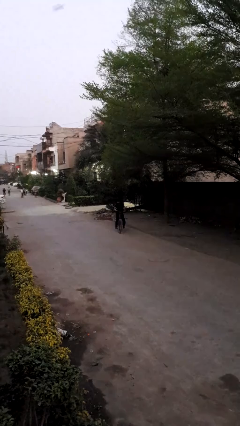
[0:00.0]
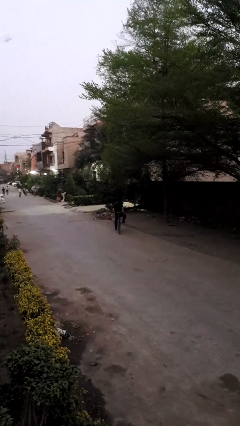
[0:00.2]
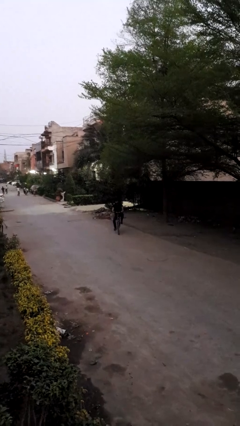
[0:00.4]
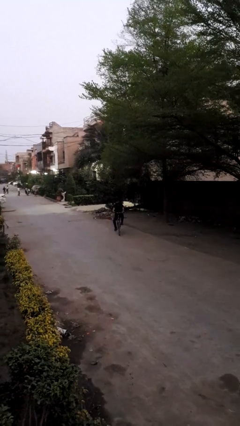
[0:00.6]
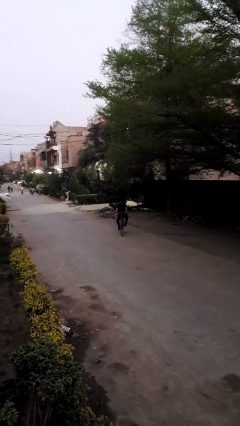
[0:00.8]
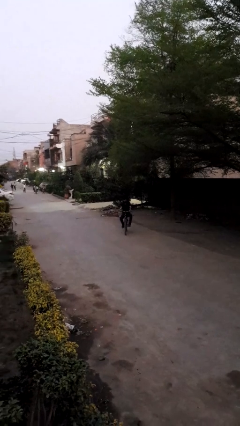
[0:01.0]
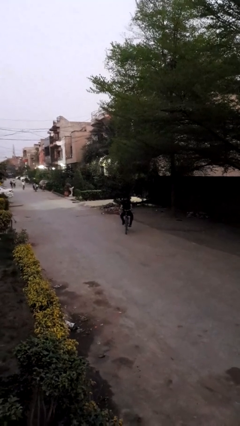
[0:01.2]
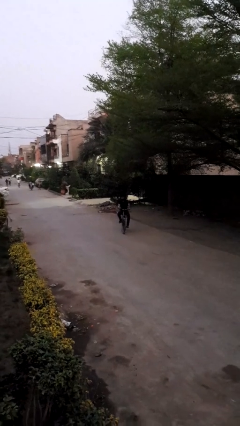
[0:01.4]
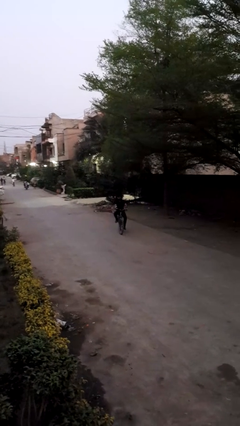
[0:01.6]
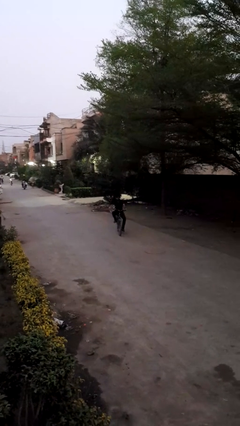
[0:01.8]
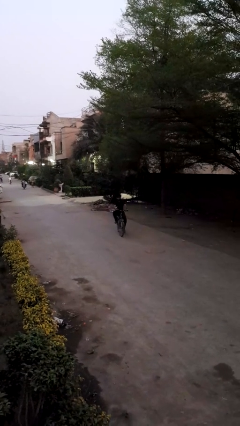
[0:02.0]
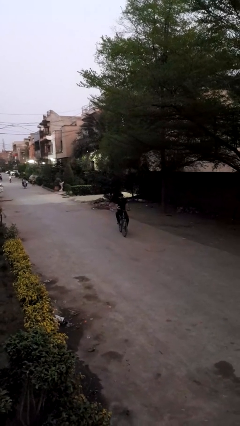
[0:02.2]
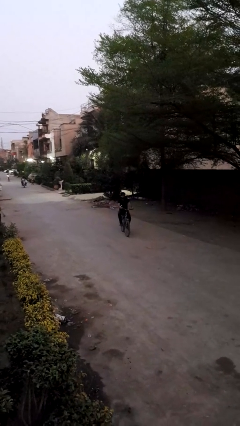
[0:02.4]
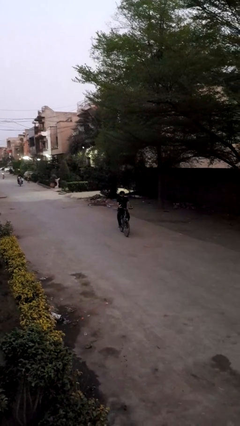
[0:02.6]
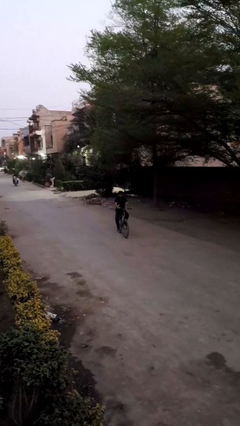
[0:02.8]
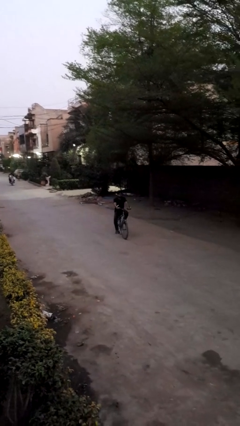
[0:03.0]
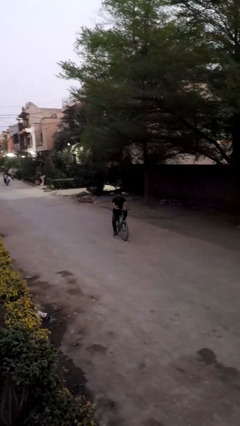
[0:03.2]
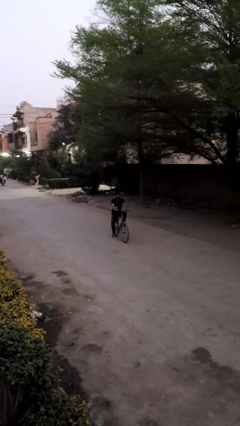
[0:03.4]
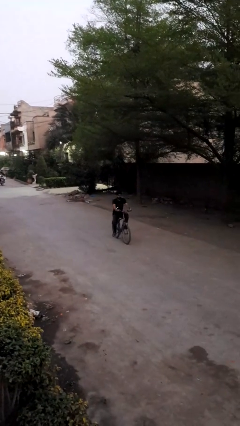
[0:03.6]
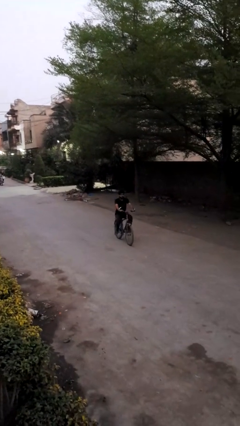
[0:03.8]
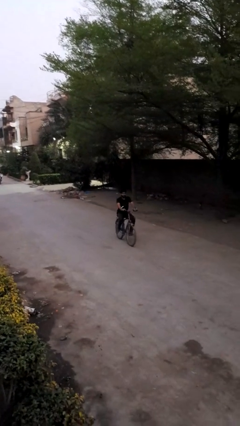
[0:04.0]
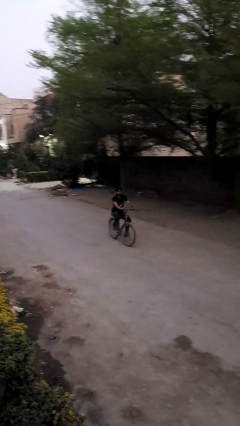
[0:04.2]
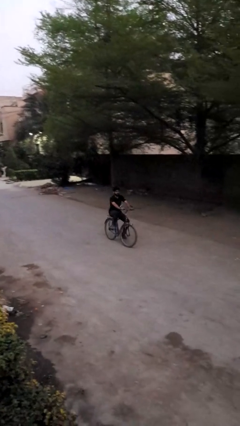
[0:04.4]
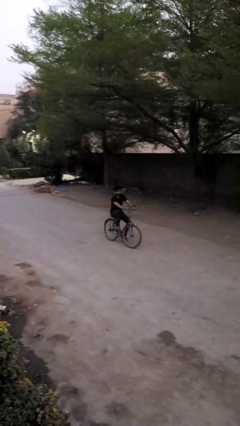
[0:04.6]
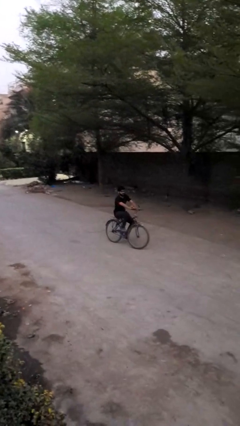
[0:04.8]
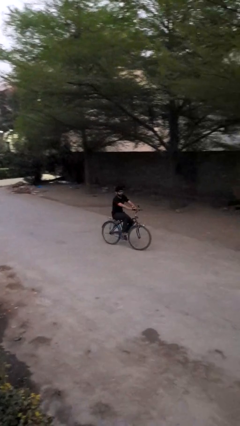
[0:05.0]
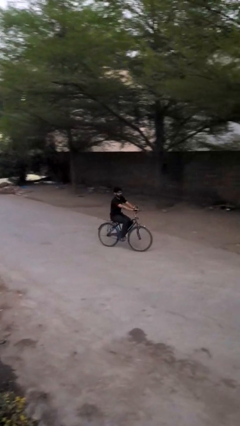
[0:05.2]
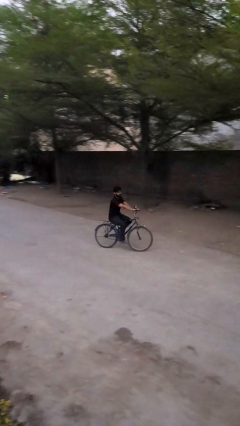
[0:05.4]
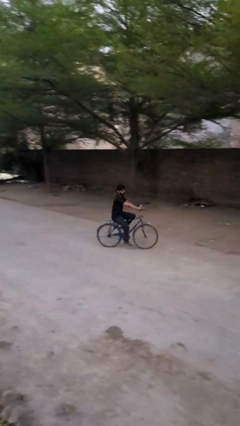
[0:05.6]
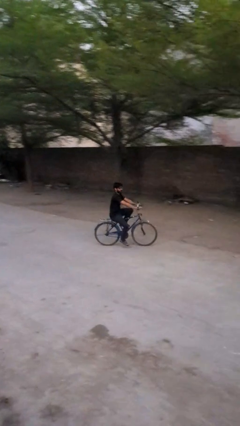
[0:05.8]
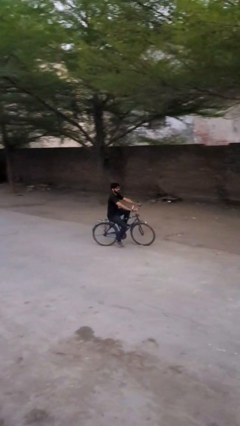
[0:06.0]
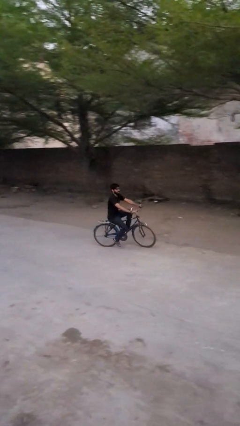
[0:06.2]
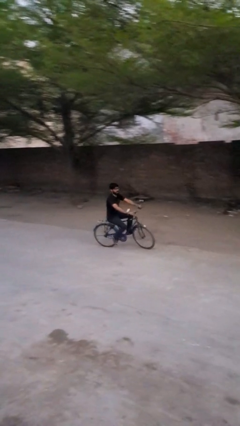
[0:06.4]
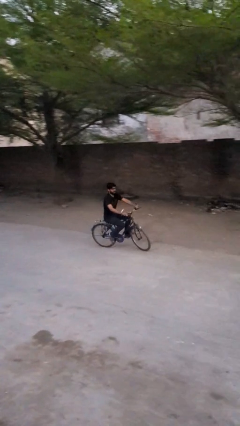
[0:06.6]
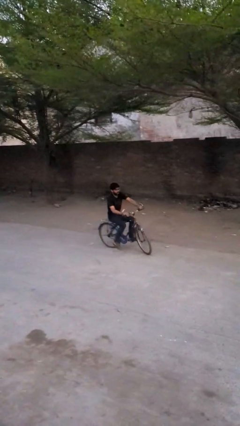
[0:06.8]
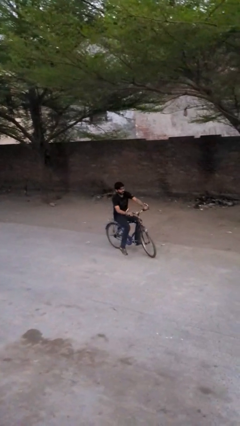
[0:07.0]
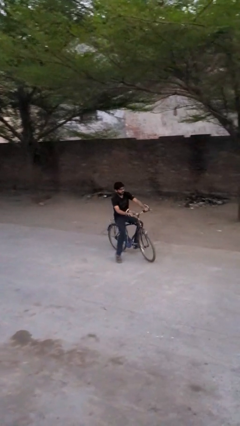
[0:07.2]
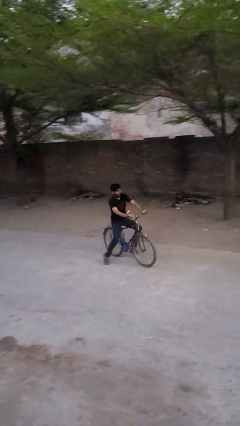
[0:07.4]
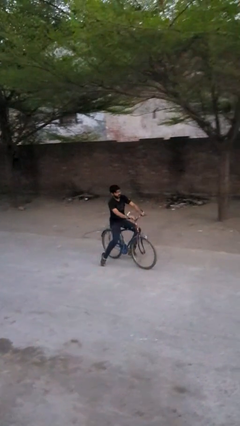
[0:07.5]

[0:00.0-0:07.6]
person rides bicycle

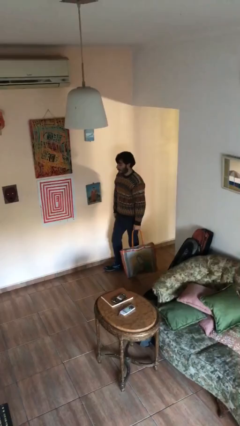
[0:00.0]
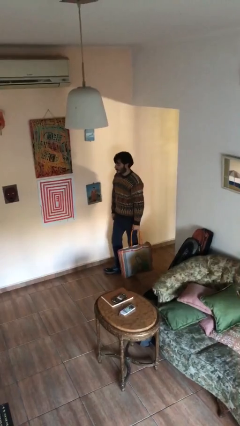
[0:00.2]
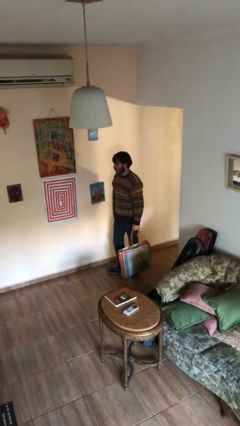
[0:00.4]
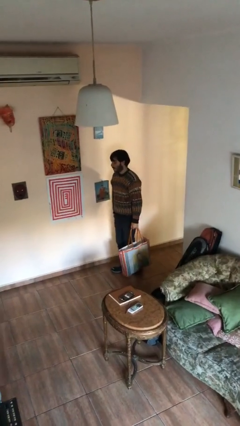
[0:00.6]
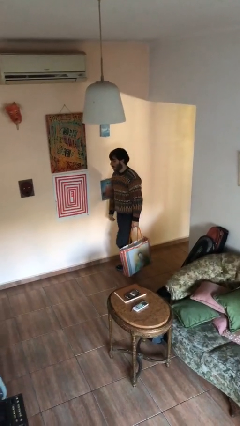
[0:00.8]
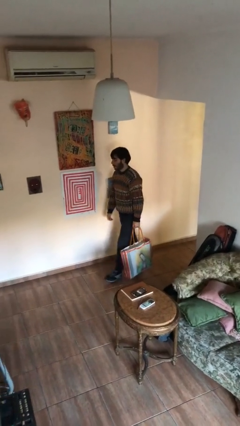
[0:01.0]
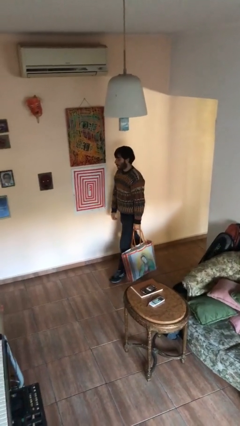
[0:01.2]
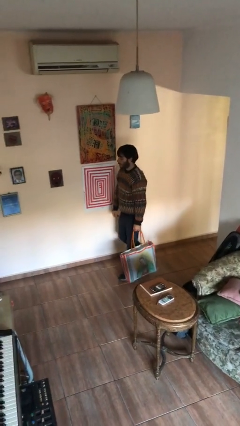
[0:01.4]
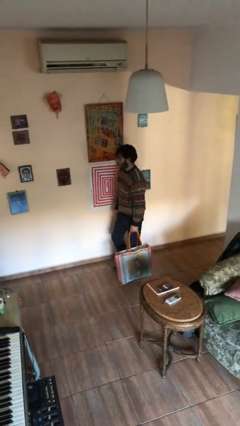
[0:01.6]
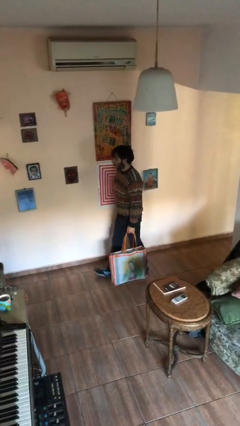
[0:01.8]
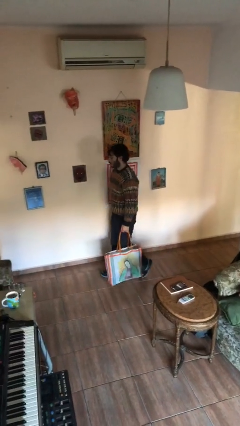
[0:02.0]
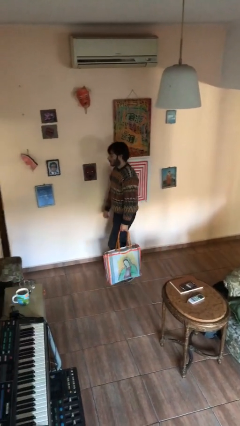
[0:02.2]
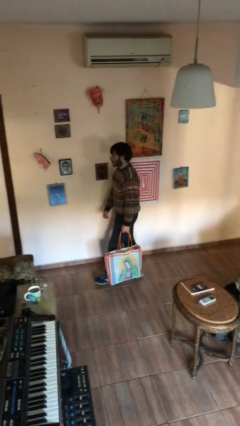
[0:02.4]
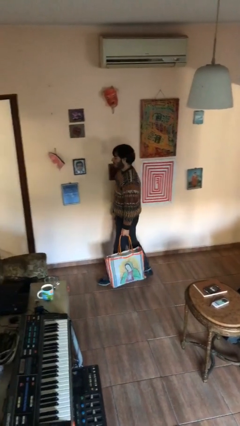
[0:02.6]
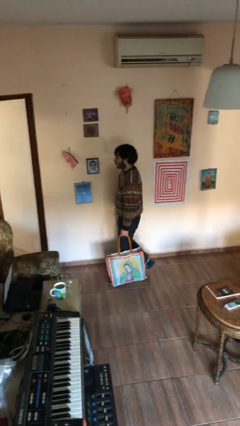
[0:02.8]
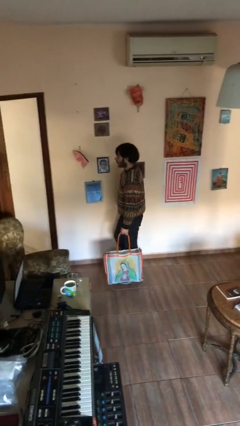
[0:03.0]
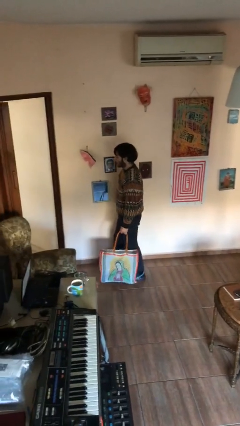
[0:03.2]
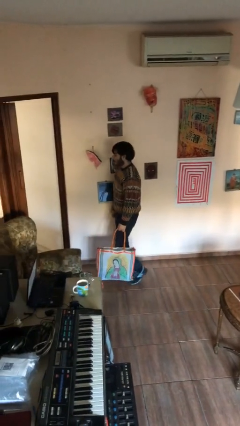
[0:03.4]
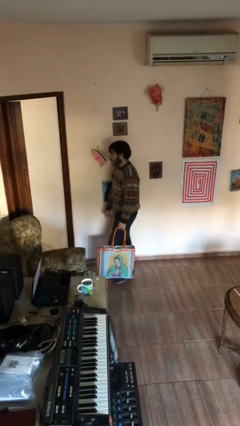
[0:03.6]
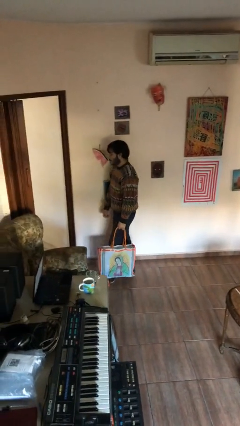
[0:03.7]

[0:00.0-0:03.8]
person carries groceries

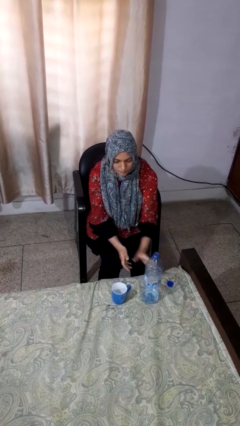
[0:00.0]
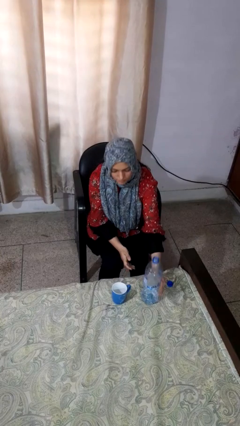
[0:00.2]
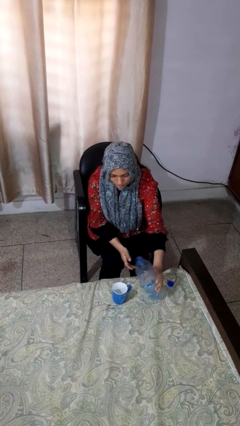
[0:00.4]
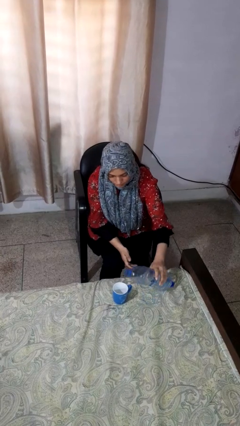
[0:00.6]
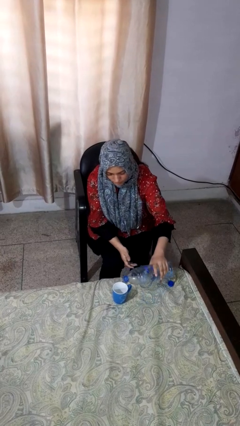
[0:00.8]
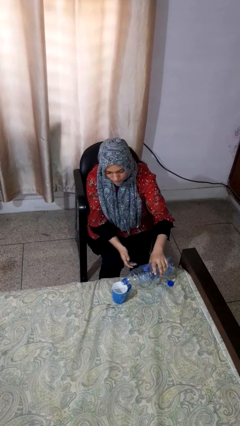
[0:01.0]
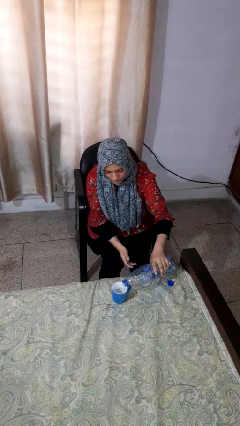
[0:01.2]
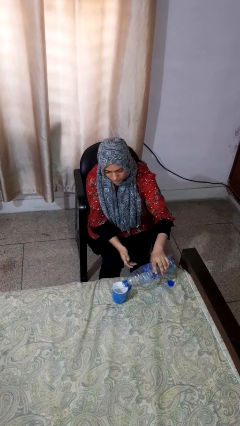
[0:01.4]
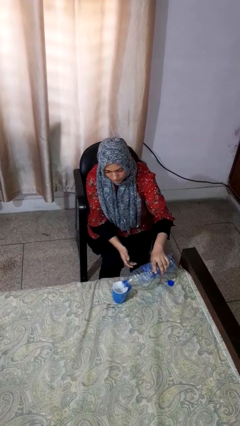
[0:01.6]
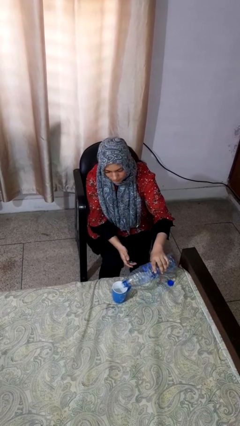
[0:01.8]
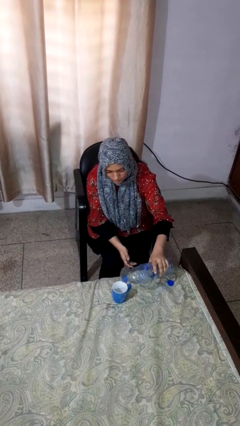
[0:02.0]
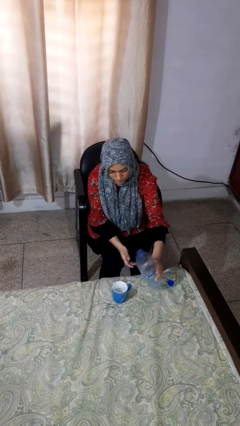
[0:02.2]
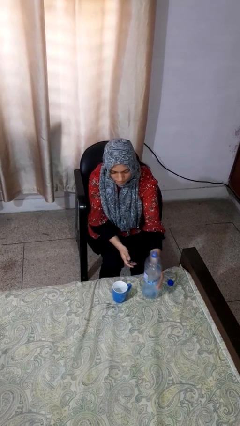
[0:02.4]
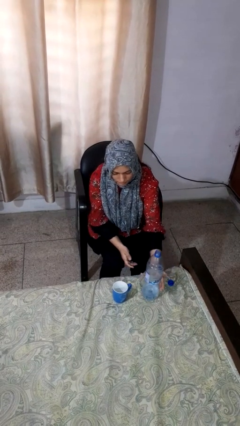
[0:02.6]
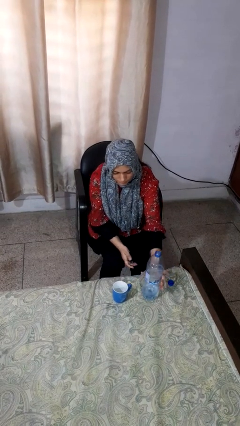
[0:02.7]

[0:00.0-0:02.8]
person pours liquid into cup

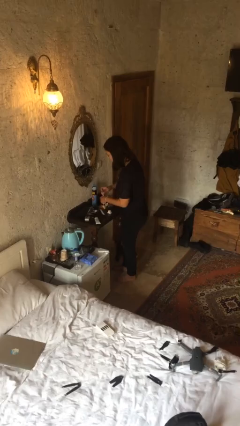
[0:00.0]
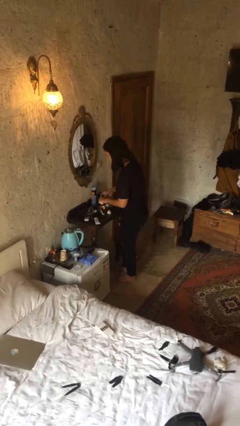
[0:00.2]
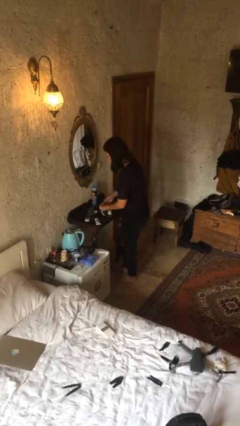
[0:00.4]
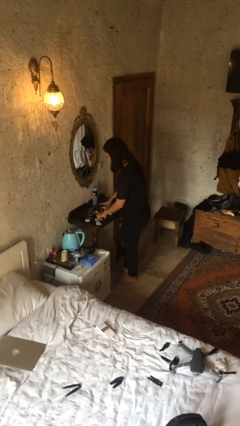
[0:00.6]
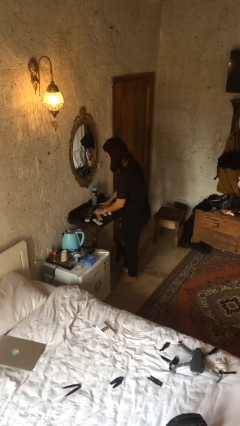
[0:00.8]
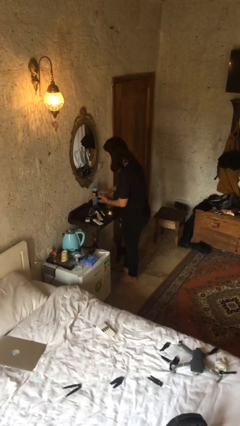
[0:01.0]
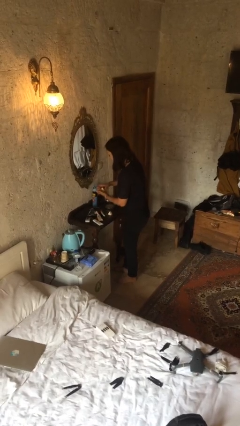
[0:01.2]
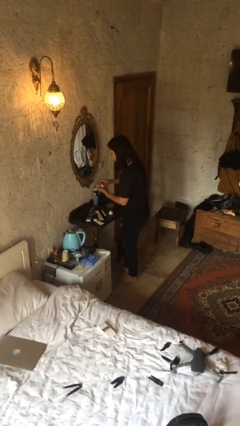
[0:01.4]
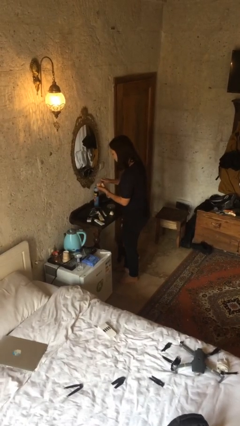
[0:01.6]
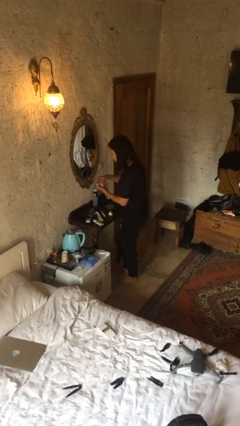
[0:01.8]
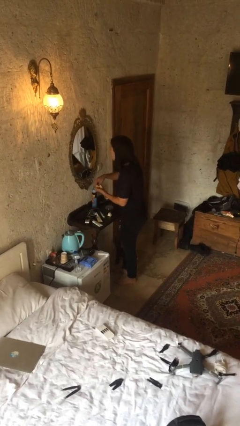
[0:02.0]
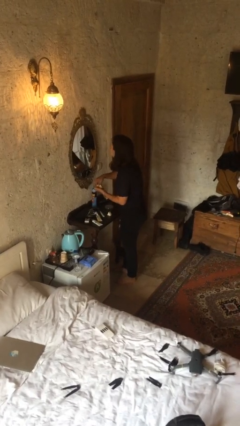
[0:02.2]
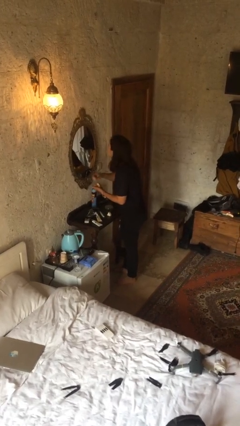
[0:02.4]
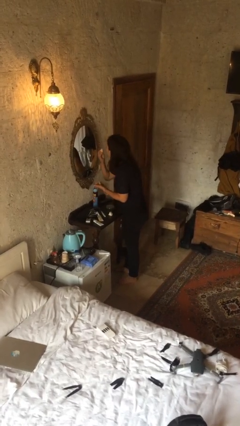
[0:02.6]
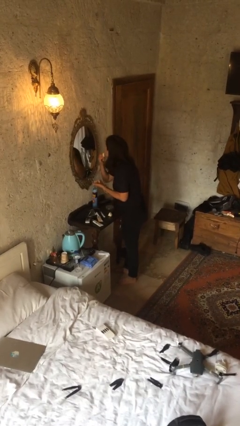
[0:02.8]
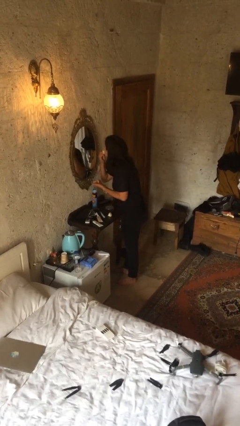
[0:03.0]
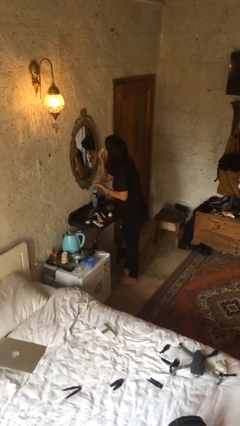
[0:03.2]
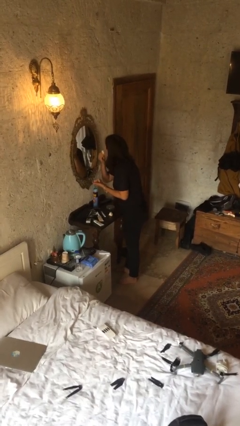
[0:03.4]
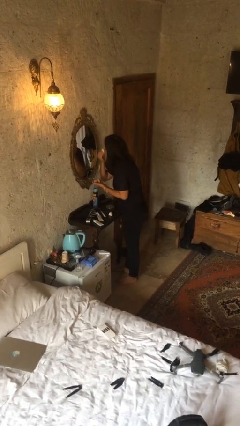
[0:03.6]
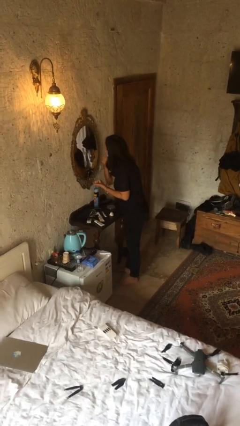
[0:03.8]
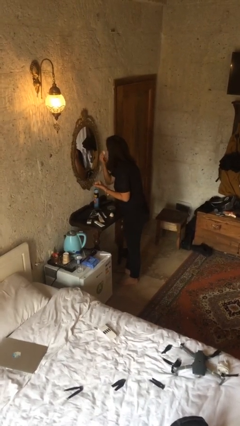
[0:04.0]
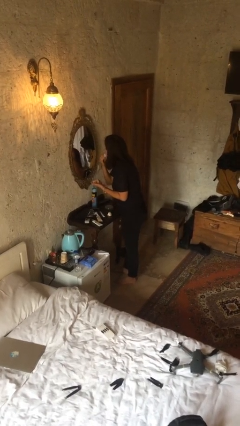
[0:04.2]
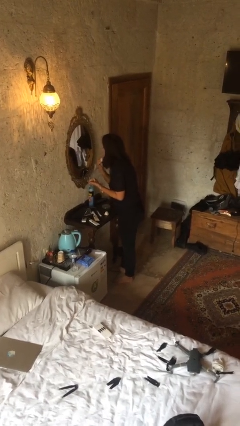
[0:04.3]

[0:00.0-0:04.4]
person applies foundation makeup
